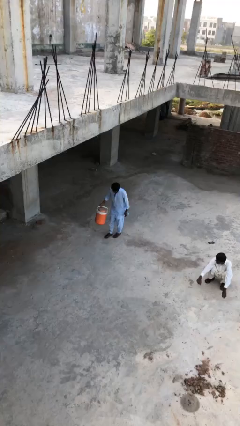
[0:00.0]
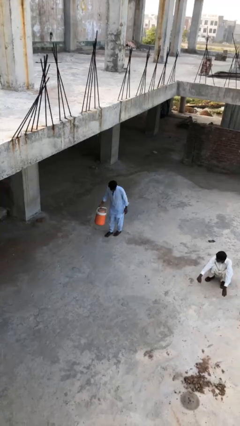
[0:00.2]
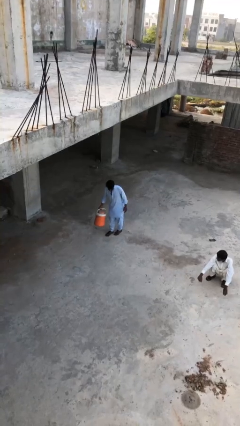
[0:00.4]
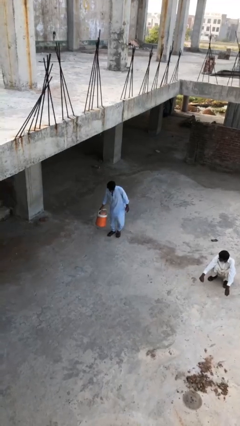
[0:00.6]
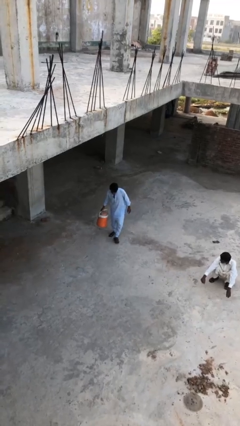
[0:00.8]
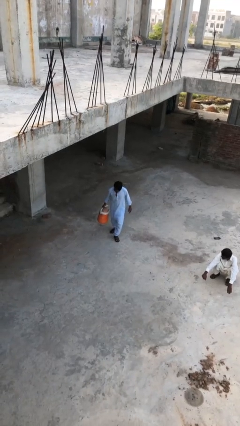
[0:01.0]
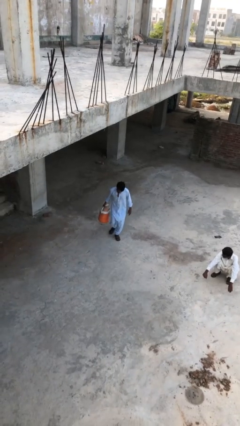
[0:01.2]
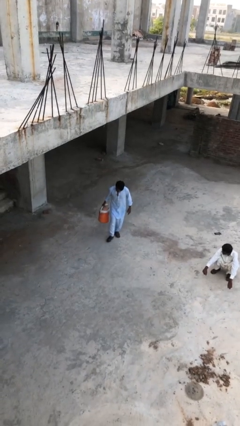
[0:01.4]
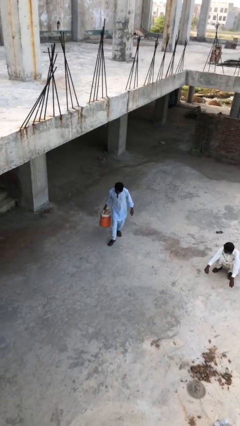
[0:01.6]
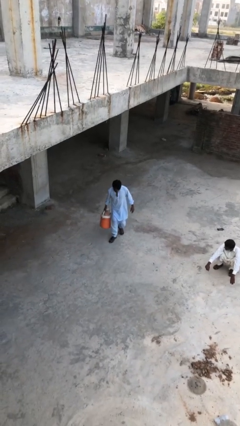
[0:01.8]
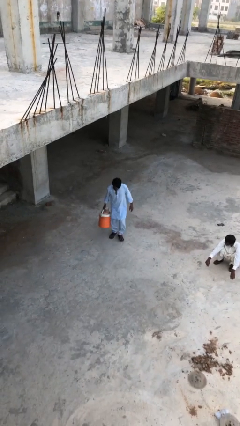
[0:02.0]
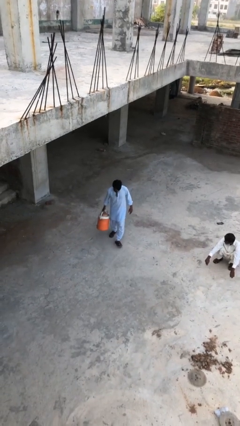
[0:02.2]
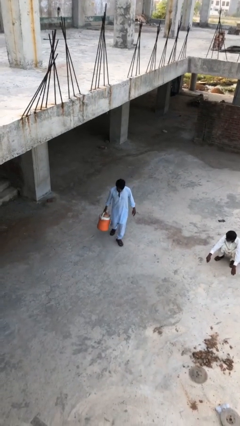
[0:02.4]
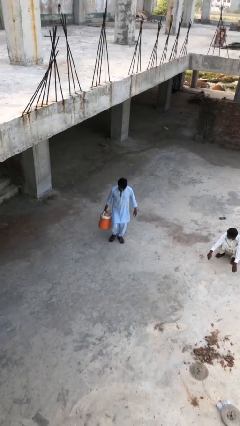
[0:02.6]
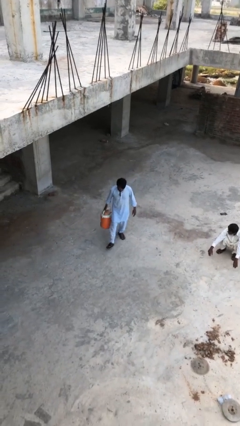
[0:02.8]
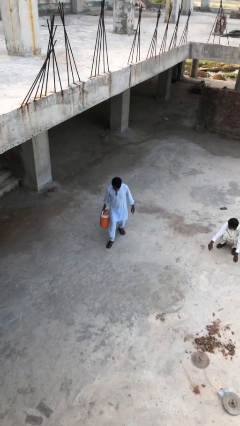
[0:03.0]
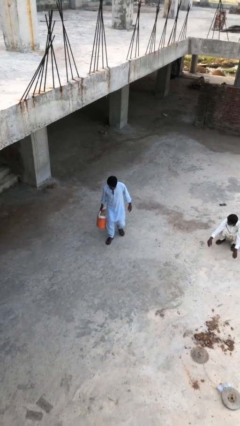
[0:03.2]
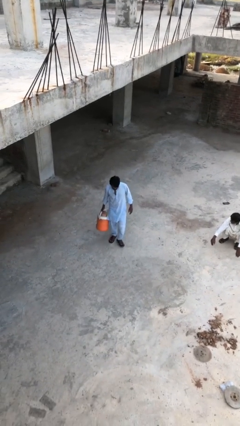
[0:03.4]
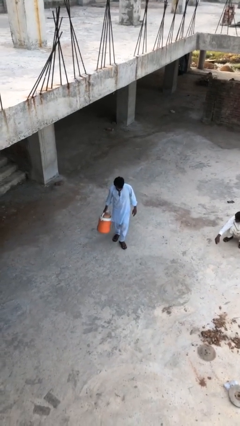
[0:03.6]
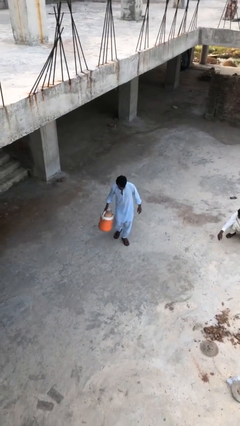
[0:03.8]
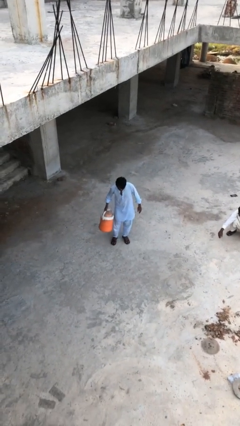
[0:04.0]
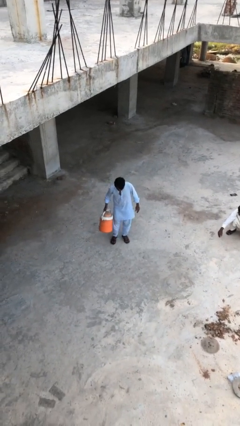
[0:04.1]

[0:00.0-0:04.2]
person carries heavy object

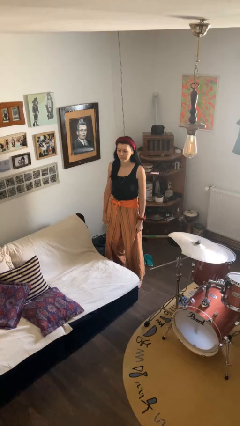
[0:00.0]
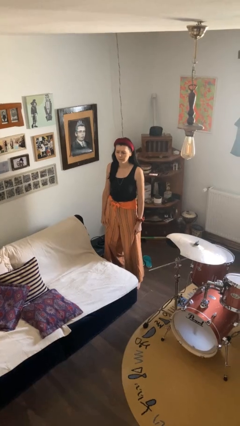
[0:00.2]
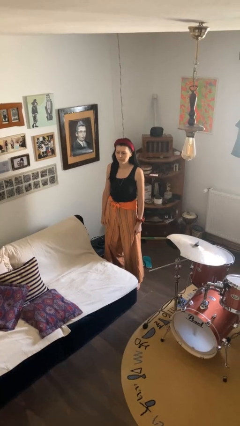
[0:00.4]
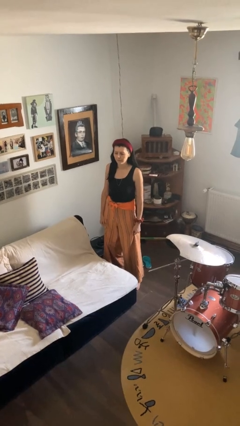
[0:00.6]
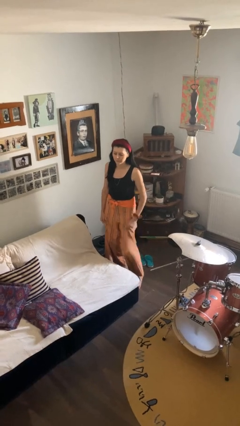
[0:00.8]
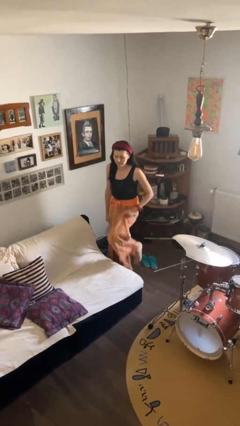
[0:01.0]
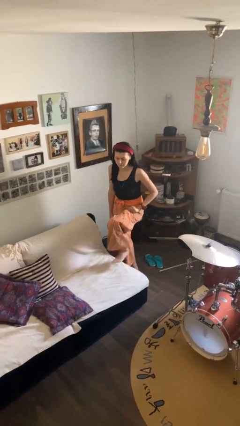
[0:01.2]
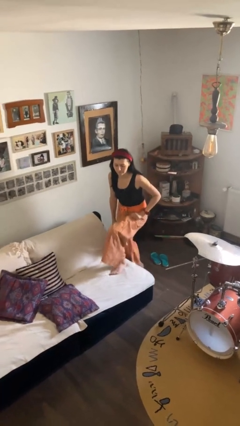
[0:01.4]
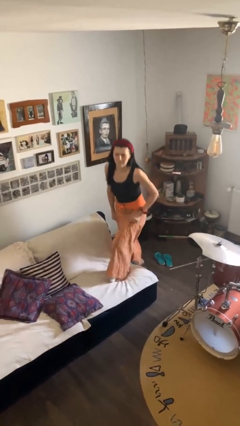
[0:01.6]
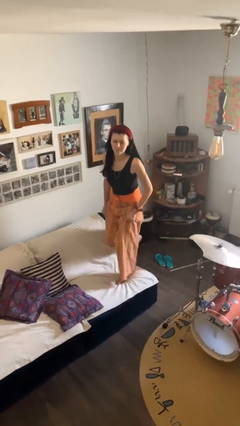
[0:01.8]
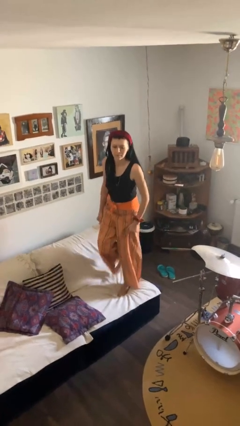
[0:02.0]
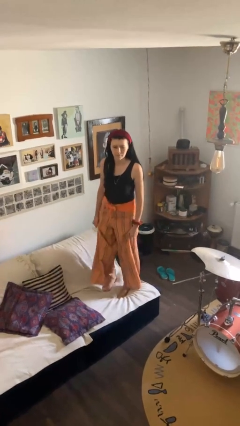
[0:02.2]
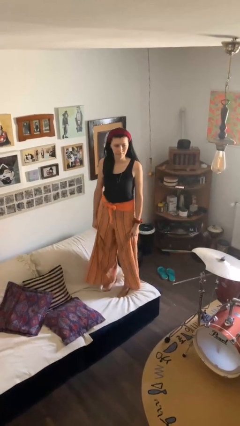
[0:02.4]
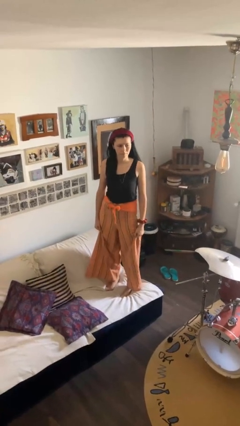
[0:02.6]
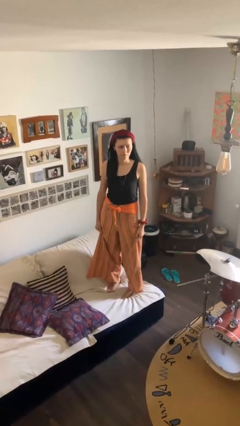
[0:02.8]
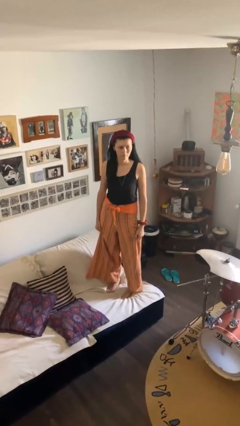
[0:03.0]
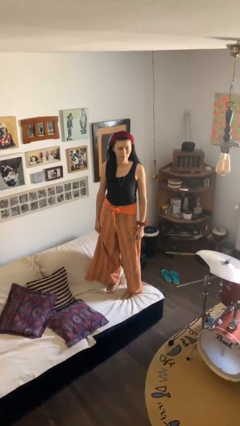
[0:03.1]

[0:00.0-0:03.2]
person climbs on couch

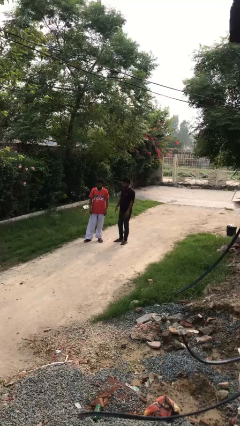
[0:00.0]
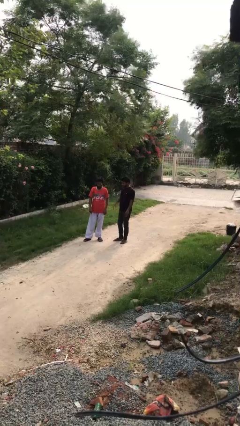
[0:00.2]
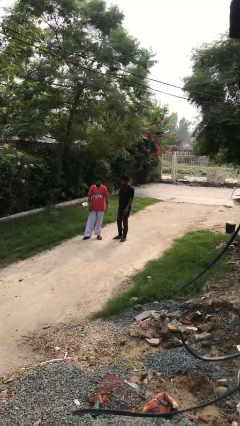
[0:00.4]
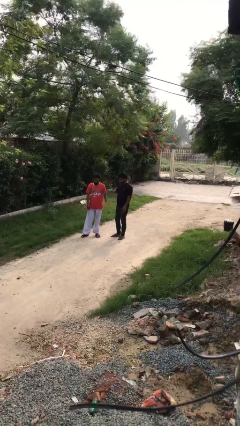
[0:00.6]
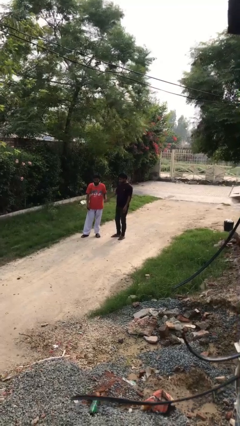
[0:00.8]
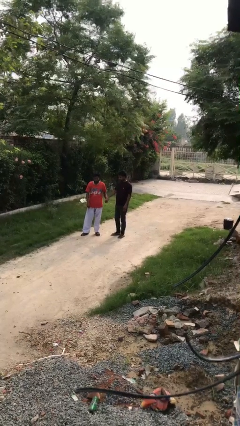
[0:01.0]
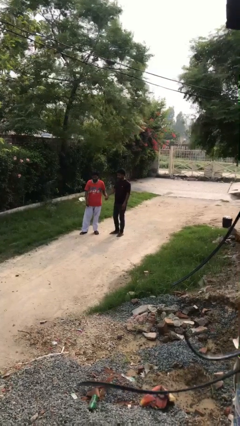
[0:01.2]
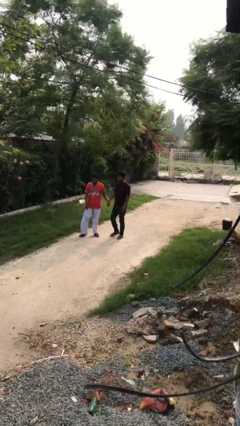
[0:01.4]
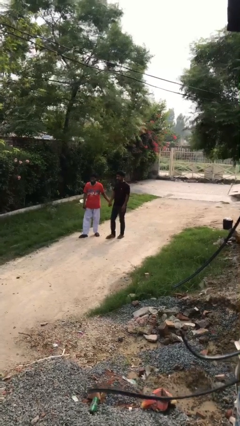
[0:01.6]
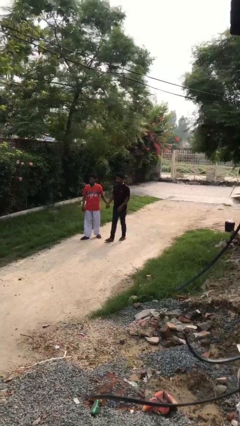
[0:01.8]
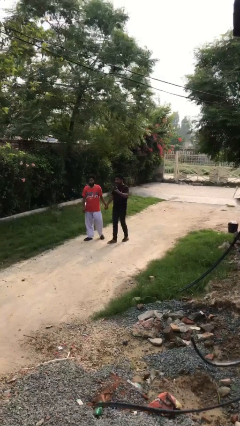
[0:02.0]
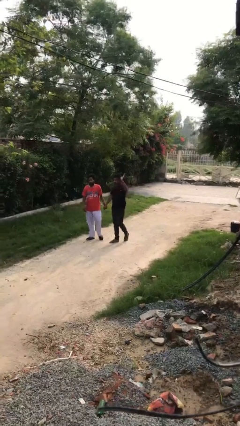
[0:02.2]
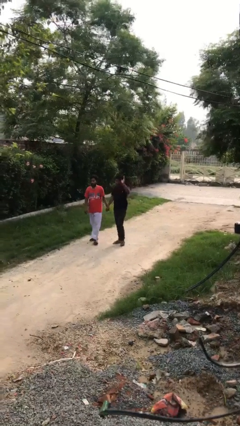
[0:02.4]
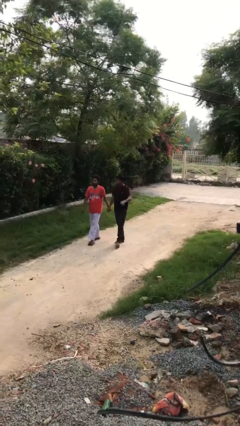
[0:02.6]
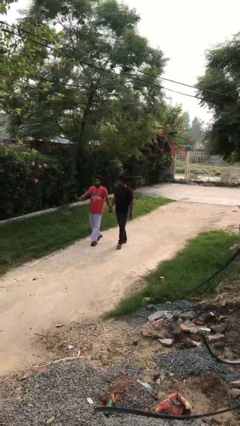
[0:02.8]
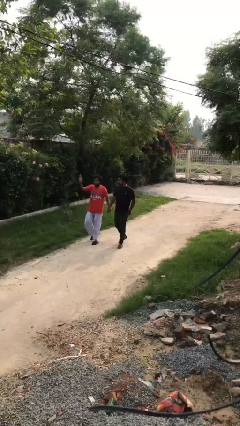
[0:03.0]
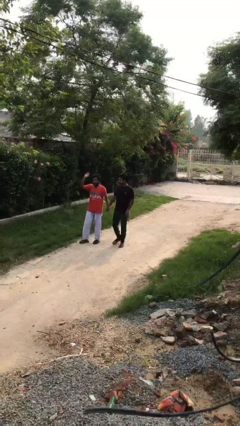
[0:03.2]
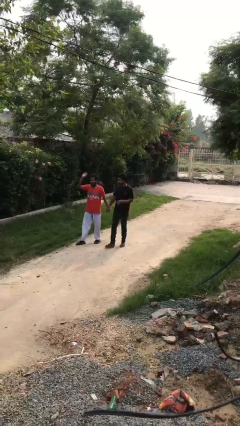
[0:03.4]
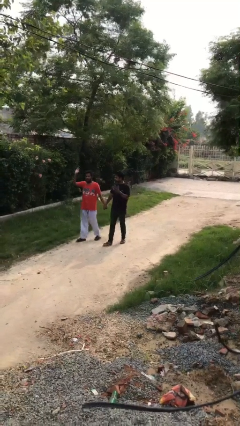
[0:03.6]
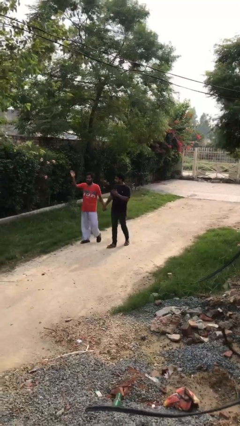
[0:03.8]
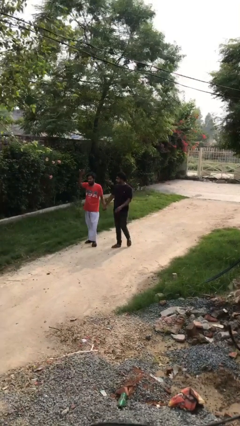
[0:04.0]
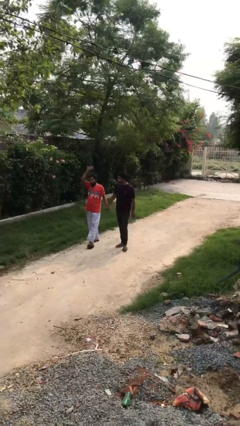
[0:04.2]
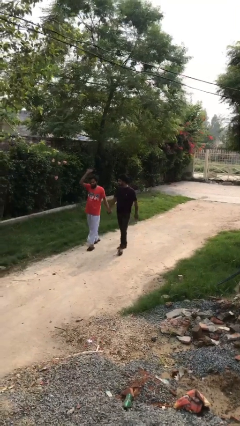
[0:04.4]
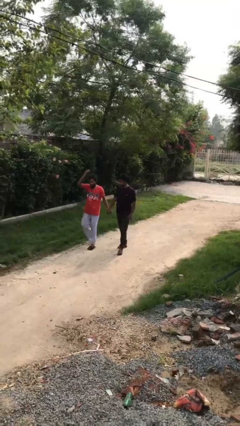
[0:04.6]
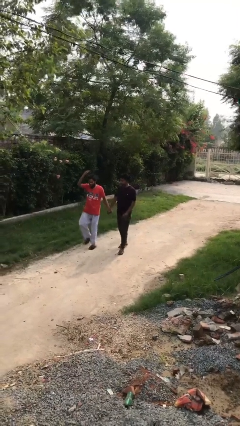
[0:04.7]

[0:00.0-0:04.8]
person holds hand

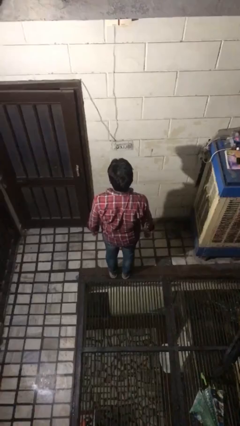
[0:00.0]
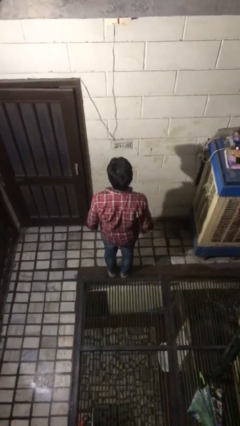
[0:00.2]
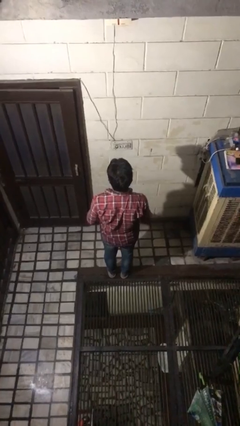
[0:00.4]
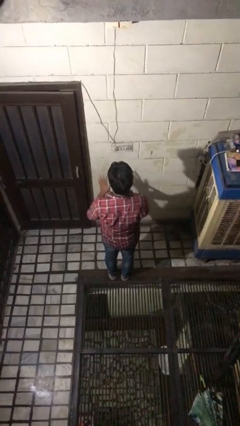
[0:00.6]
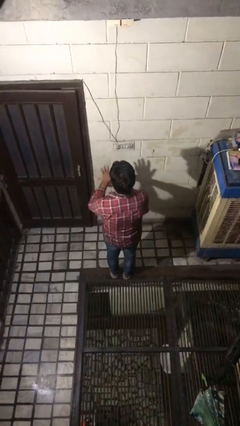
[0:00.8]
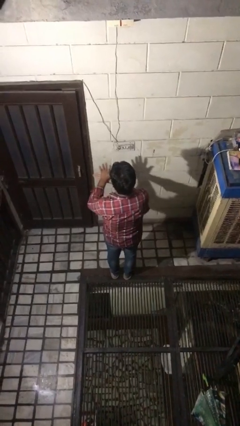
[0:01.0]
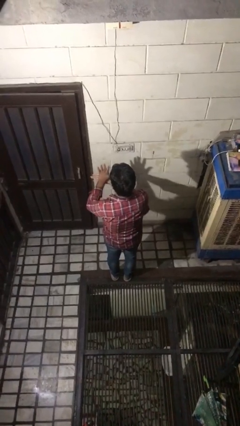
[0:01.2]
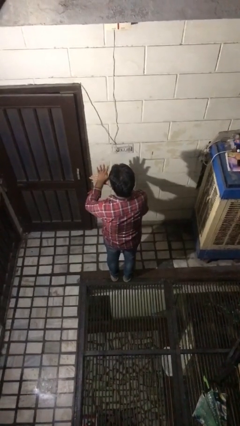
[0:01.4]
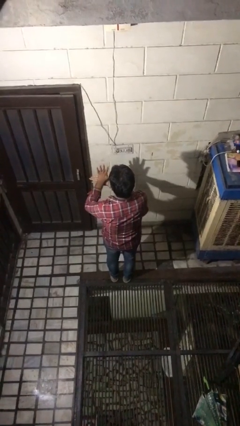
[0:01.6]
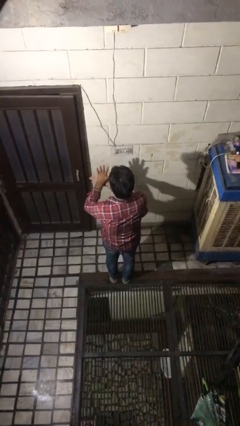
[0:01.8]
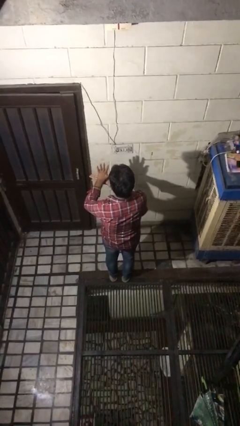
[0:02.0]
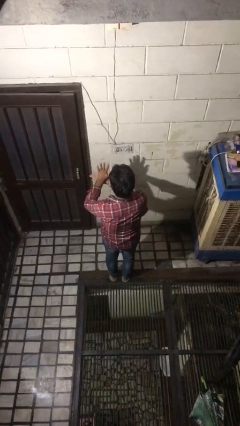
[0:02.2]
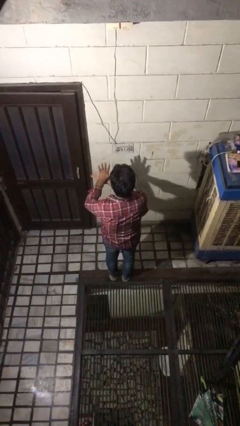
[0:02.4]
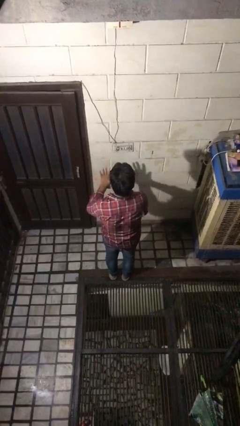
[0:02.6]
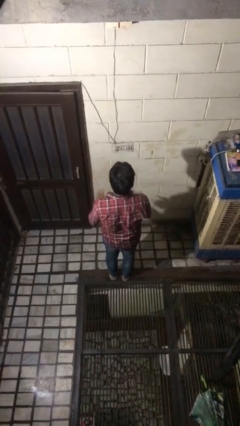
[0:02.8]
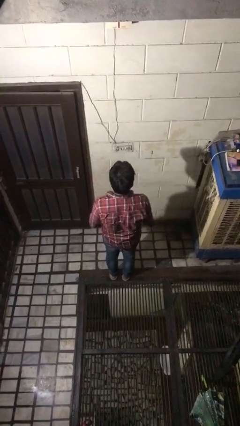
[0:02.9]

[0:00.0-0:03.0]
person gestures number five

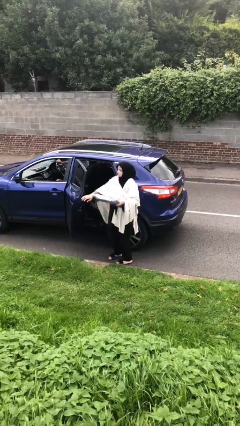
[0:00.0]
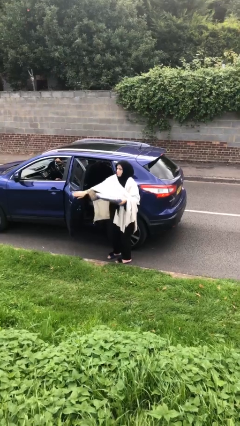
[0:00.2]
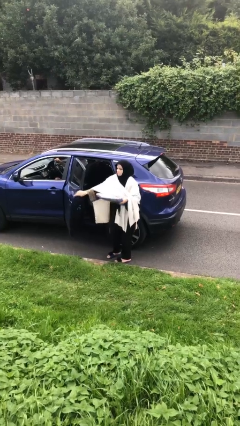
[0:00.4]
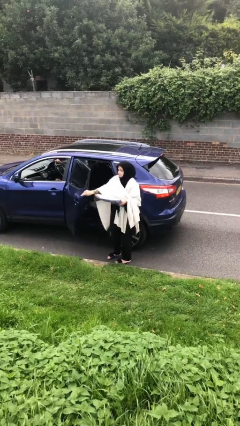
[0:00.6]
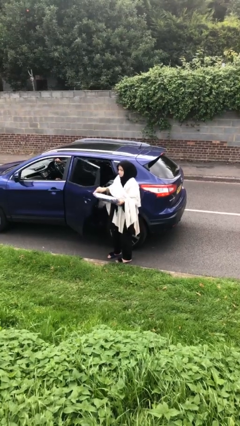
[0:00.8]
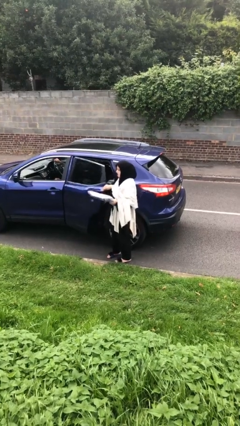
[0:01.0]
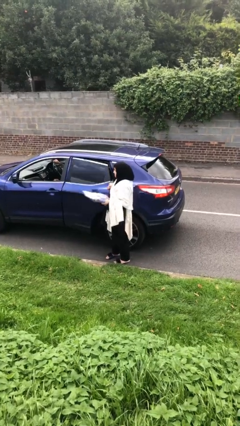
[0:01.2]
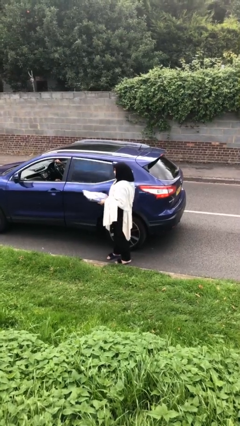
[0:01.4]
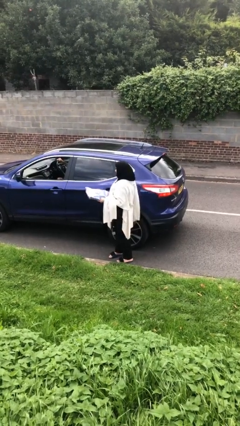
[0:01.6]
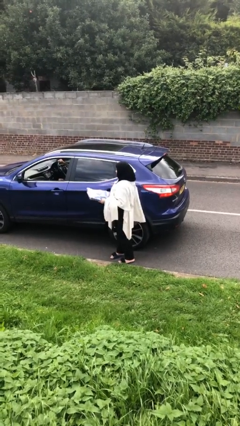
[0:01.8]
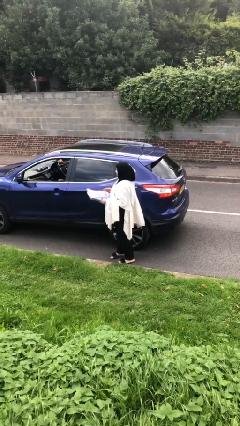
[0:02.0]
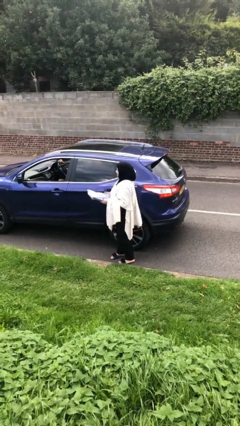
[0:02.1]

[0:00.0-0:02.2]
person closes car door

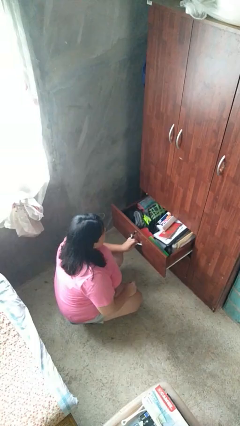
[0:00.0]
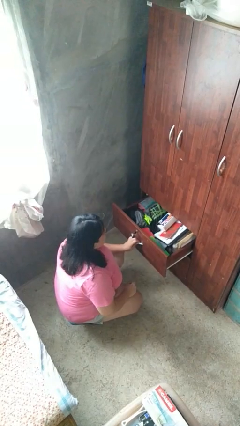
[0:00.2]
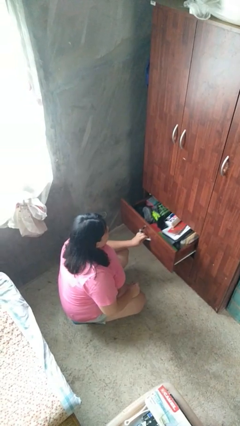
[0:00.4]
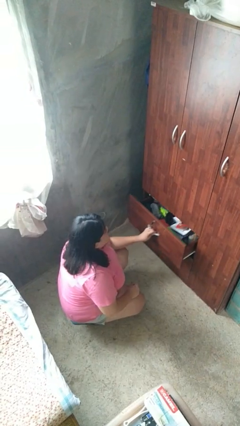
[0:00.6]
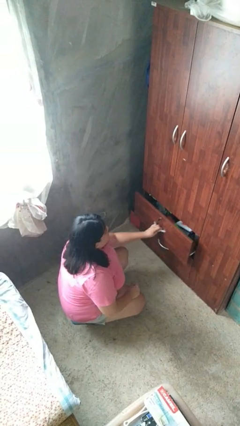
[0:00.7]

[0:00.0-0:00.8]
person closes dresser drawer
